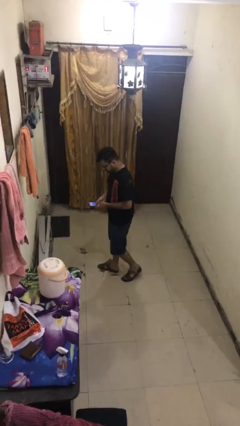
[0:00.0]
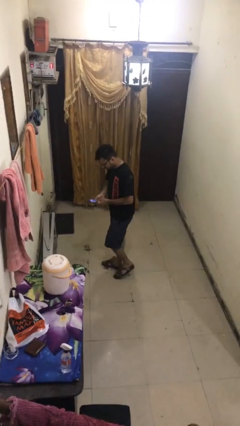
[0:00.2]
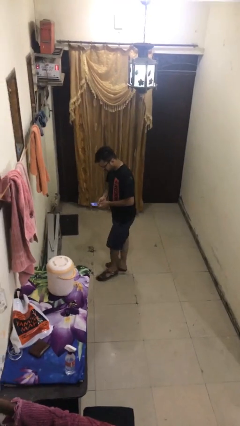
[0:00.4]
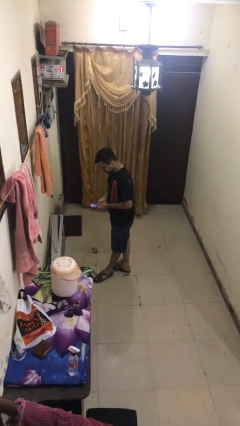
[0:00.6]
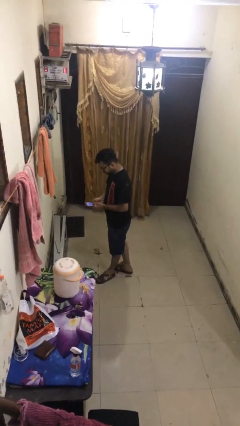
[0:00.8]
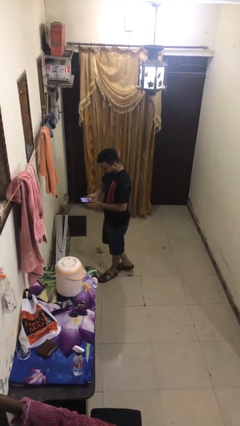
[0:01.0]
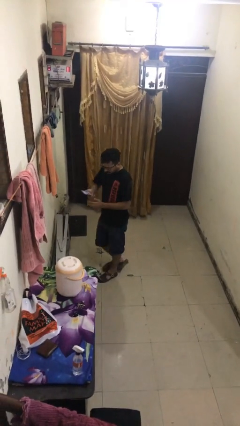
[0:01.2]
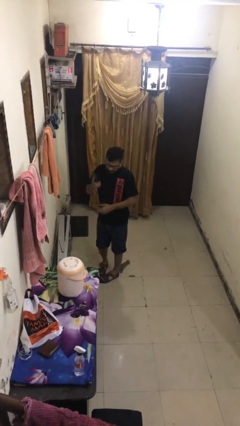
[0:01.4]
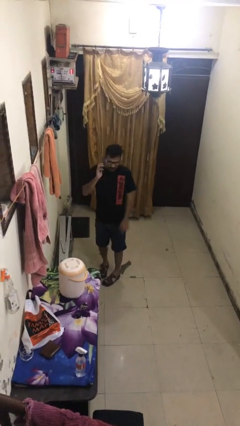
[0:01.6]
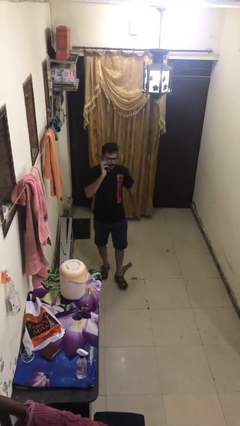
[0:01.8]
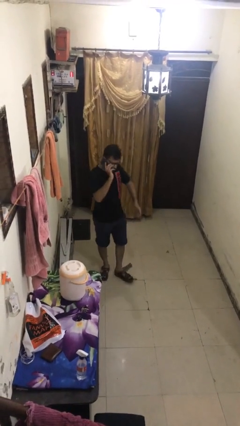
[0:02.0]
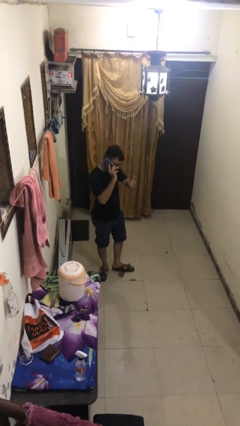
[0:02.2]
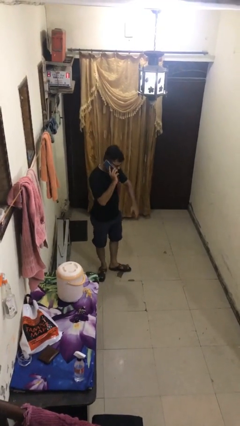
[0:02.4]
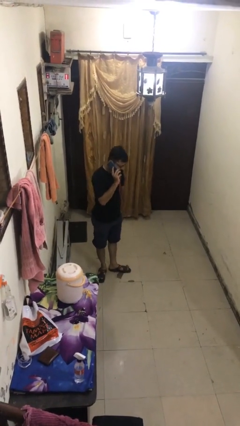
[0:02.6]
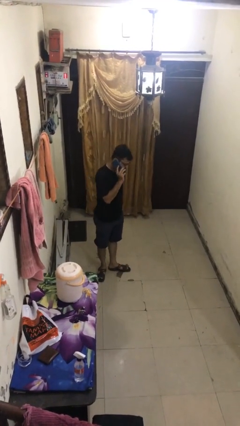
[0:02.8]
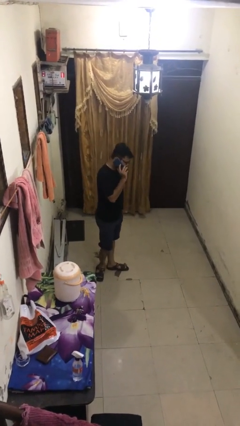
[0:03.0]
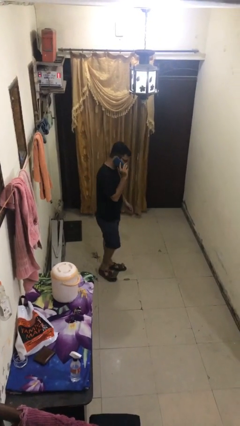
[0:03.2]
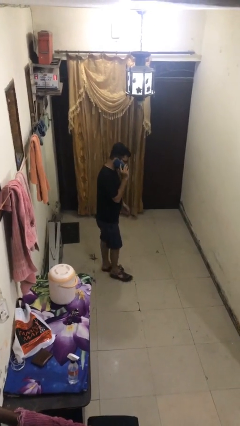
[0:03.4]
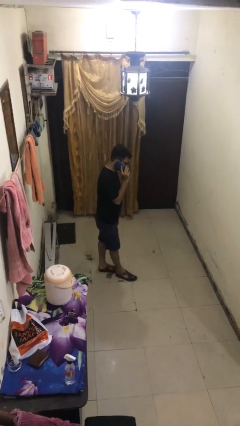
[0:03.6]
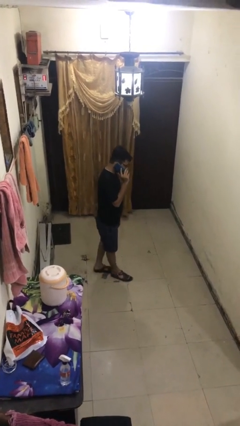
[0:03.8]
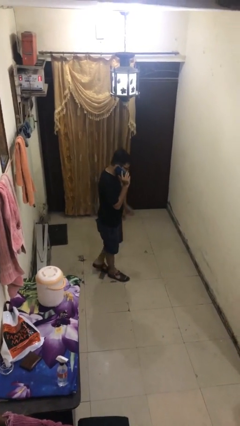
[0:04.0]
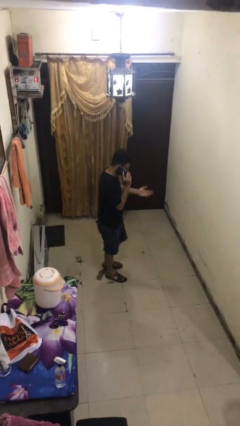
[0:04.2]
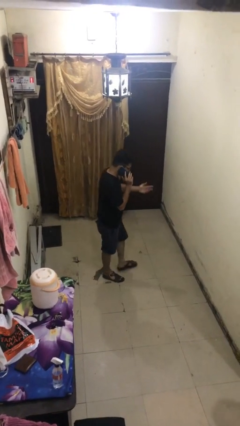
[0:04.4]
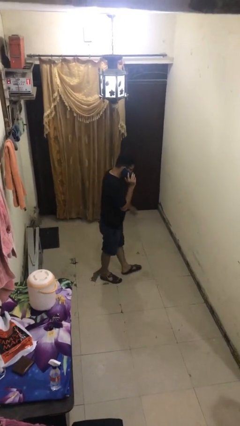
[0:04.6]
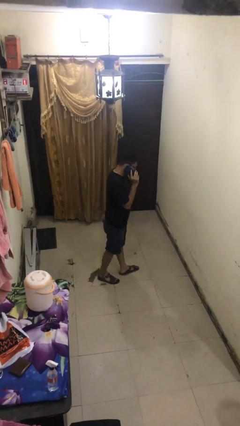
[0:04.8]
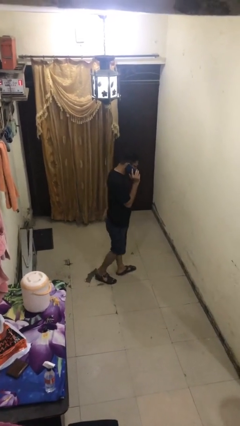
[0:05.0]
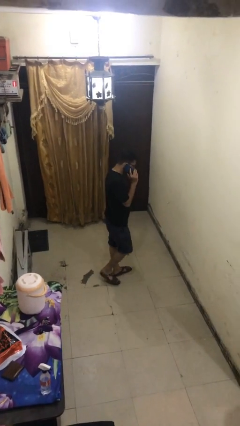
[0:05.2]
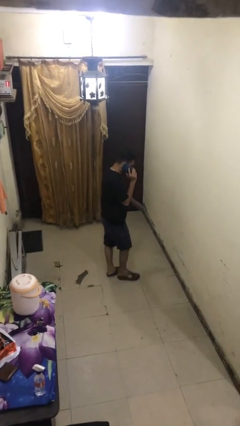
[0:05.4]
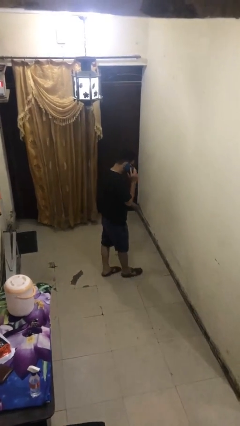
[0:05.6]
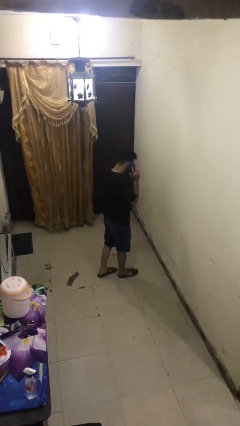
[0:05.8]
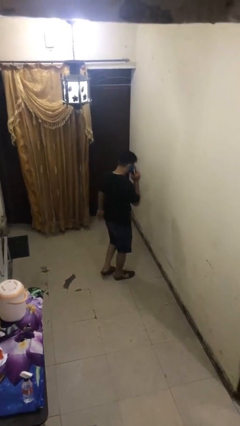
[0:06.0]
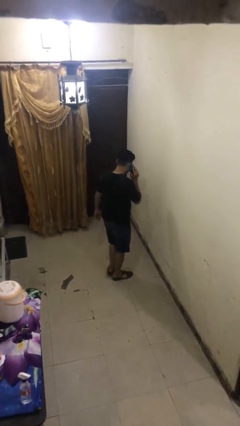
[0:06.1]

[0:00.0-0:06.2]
person talks on phone

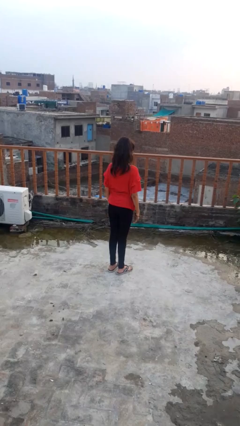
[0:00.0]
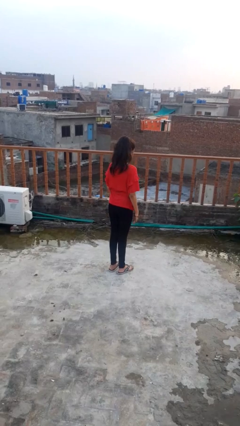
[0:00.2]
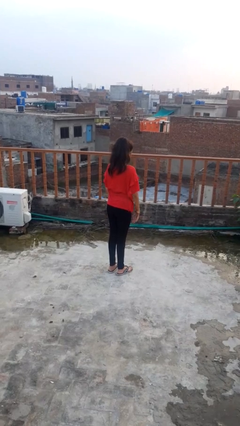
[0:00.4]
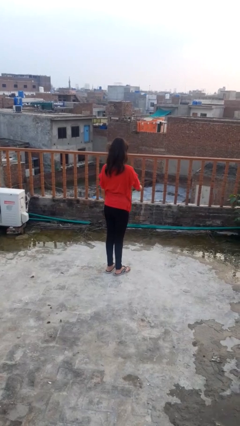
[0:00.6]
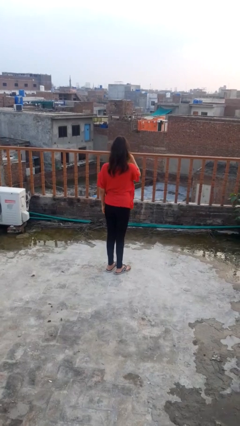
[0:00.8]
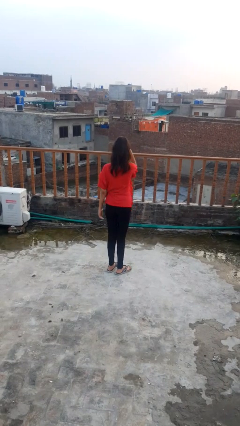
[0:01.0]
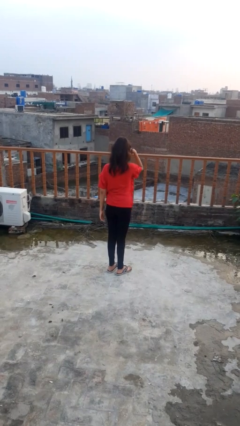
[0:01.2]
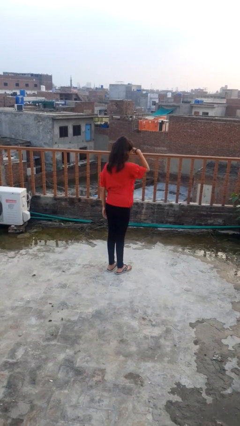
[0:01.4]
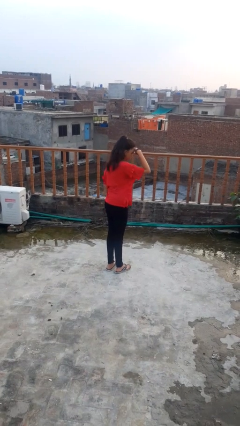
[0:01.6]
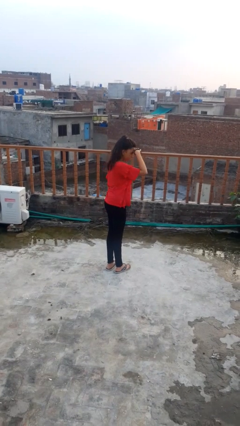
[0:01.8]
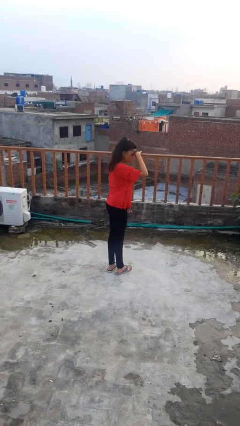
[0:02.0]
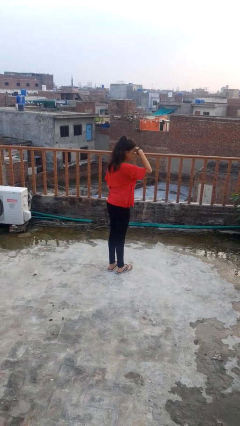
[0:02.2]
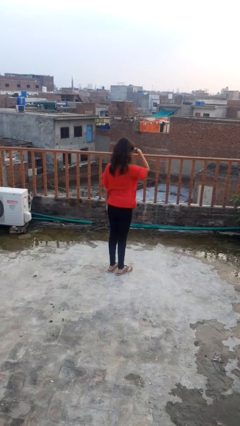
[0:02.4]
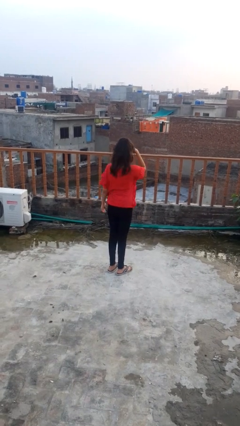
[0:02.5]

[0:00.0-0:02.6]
person shades eyes

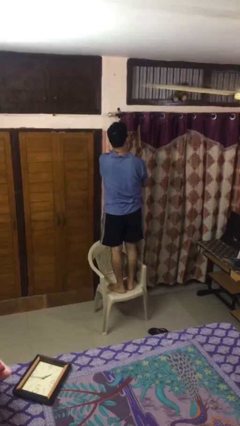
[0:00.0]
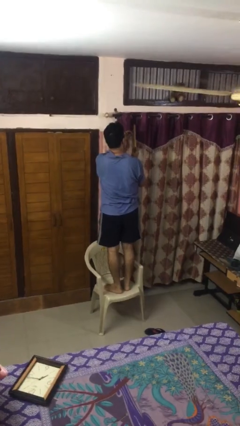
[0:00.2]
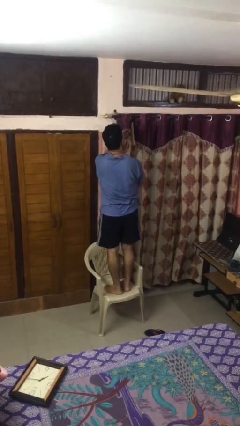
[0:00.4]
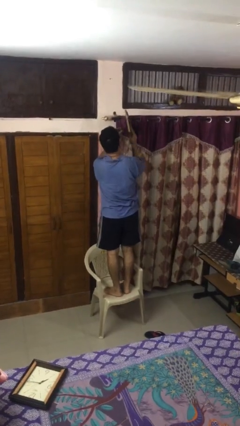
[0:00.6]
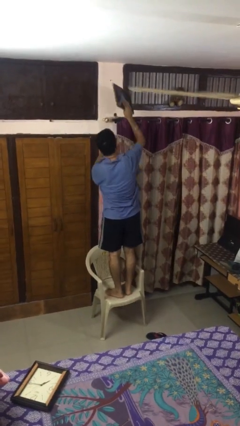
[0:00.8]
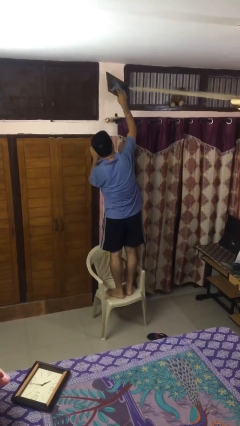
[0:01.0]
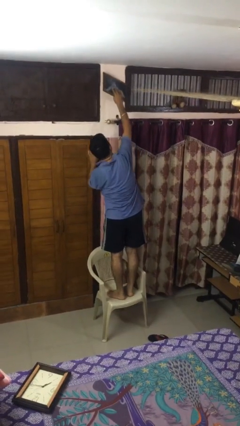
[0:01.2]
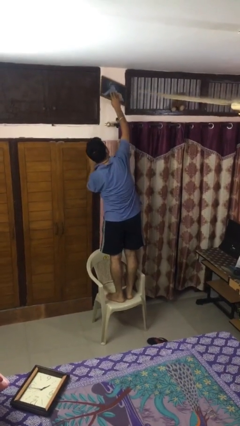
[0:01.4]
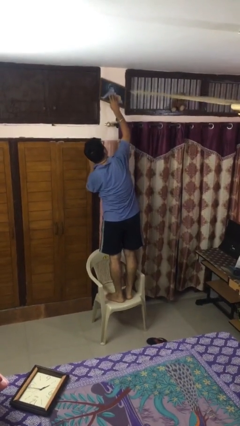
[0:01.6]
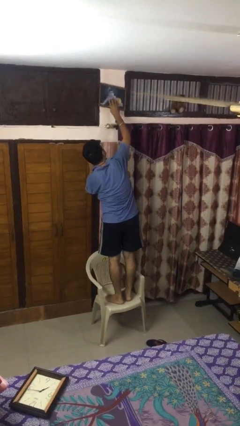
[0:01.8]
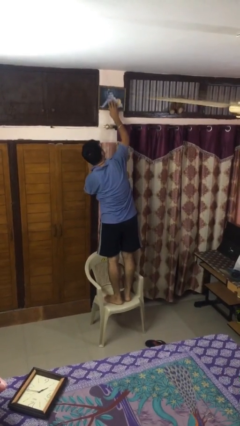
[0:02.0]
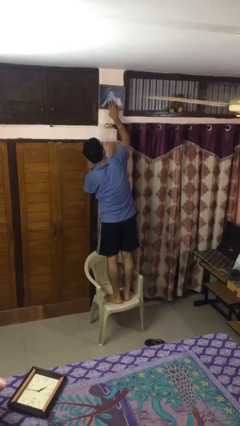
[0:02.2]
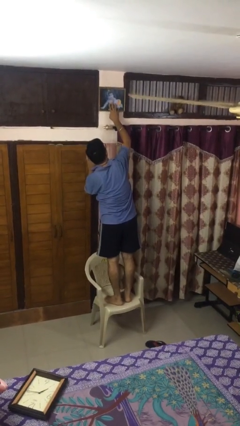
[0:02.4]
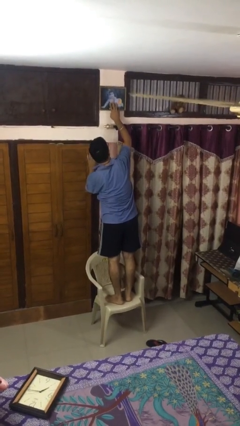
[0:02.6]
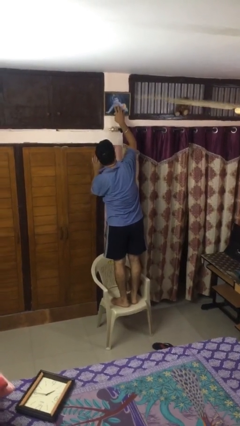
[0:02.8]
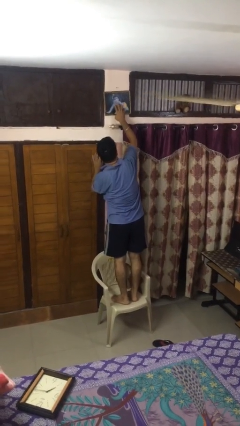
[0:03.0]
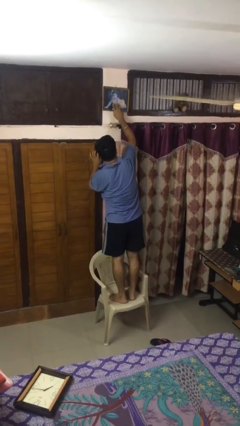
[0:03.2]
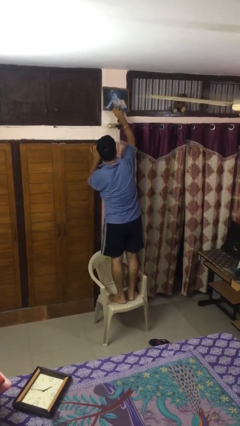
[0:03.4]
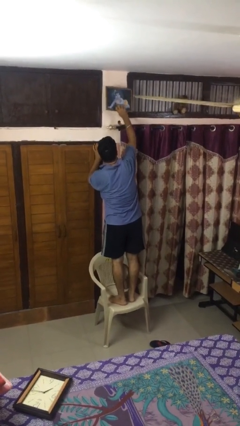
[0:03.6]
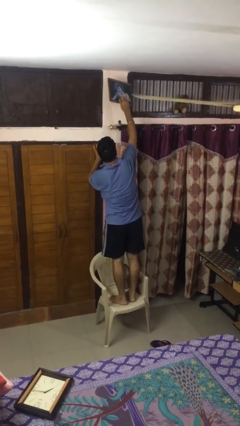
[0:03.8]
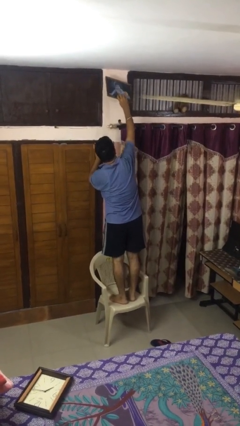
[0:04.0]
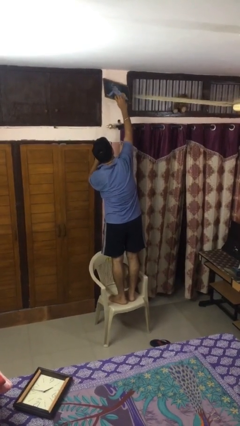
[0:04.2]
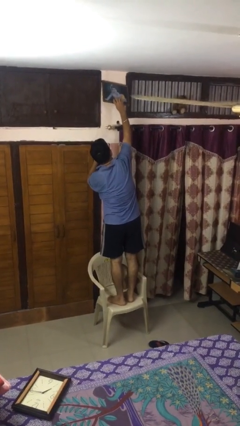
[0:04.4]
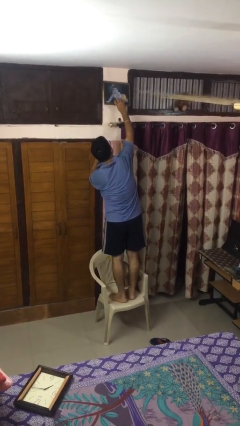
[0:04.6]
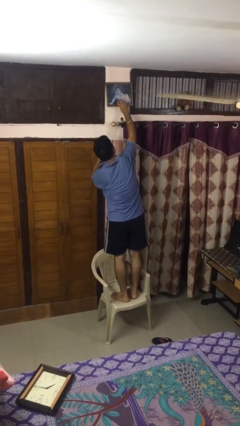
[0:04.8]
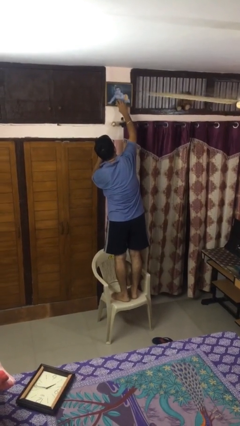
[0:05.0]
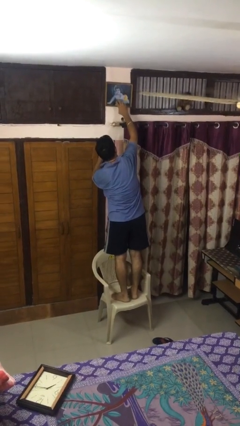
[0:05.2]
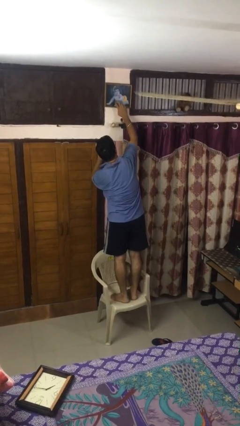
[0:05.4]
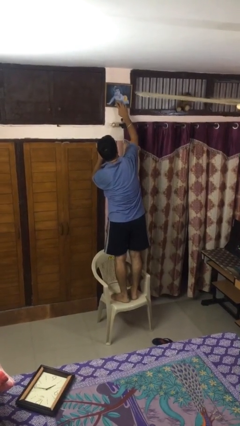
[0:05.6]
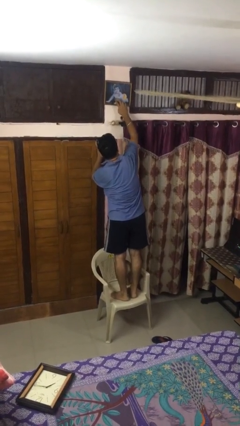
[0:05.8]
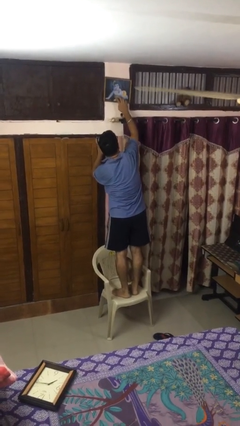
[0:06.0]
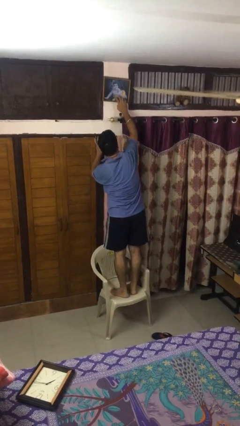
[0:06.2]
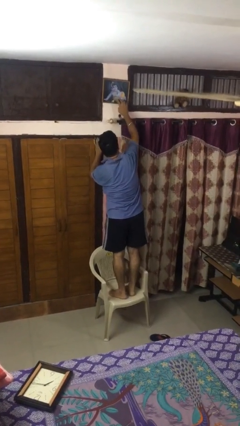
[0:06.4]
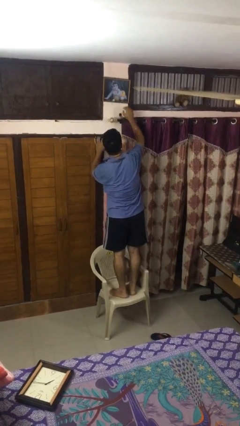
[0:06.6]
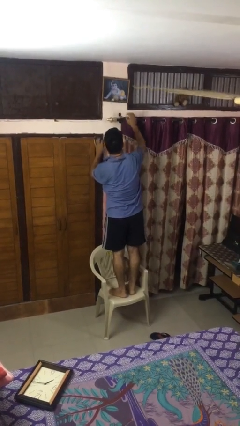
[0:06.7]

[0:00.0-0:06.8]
person puts up picture frame

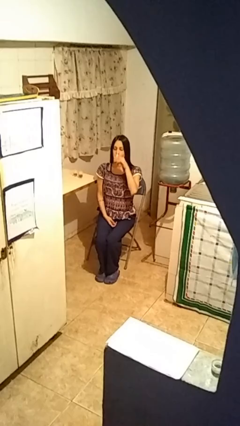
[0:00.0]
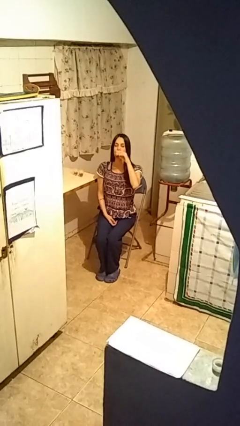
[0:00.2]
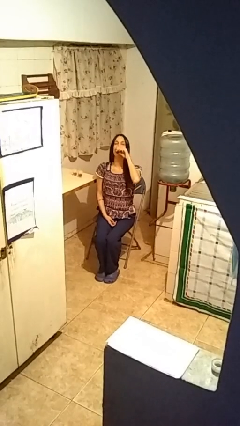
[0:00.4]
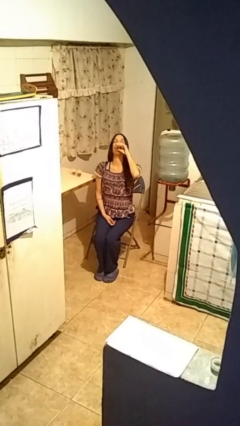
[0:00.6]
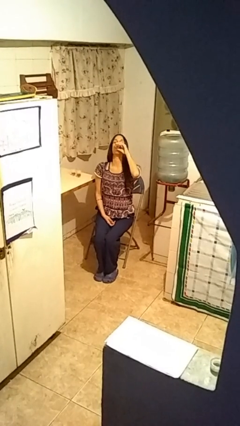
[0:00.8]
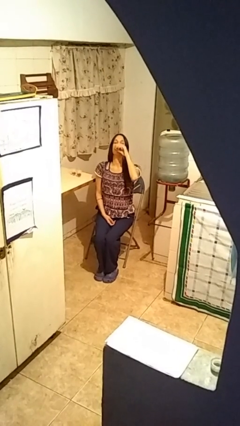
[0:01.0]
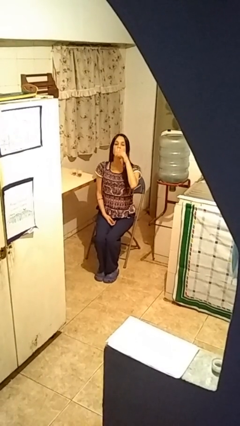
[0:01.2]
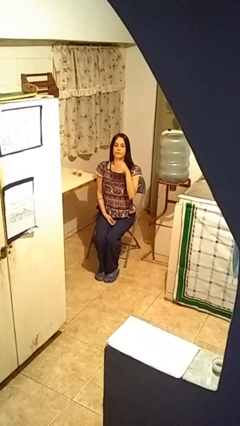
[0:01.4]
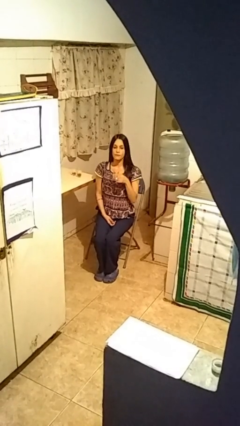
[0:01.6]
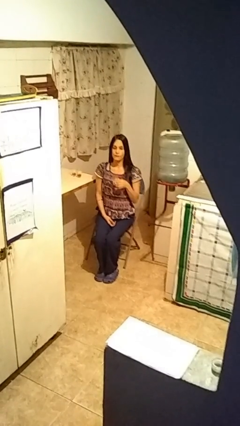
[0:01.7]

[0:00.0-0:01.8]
person drinks from shotglass
